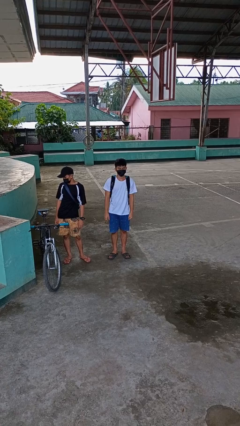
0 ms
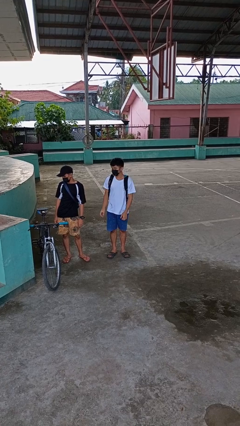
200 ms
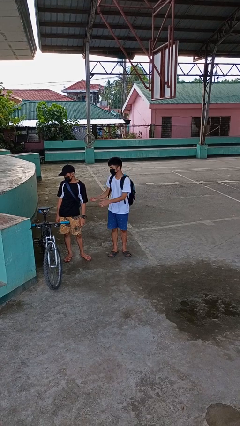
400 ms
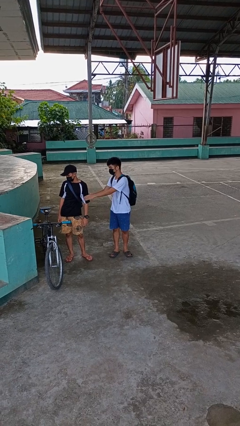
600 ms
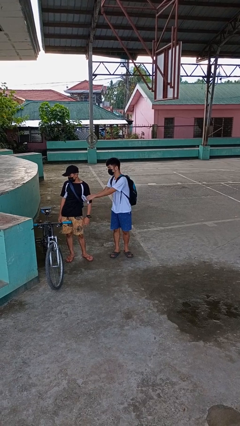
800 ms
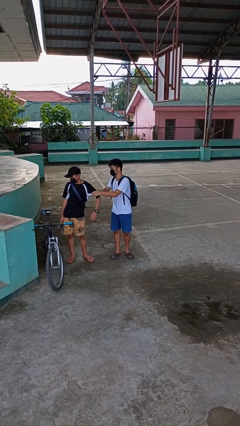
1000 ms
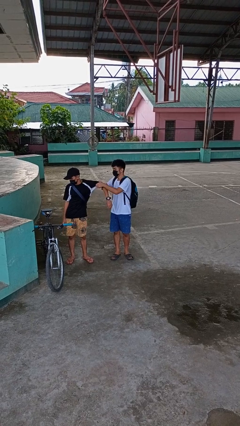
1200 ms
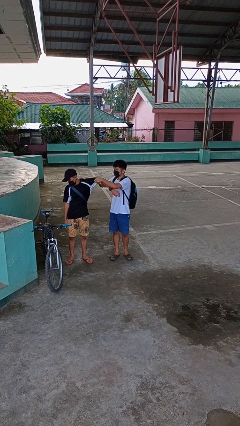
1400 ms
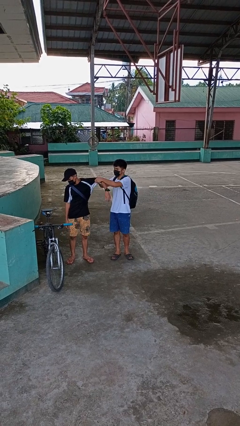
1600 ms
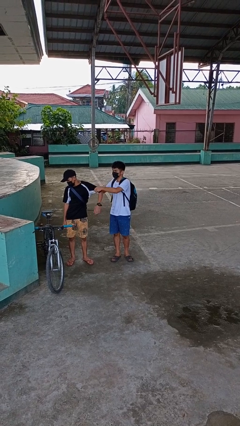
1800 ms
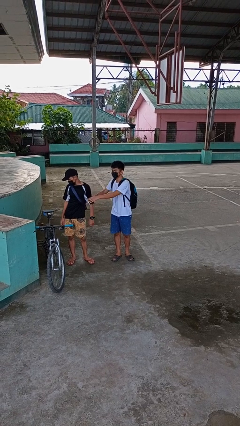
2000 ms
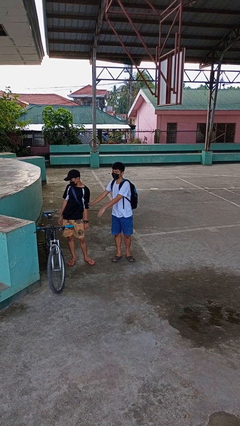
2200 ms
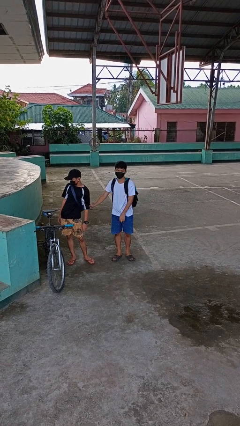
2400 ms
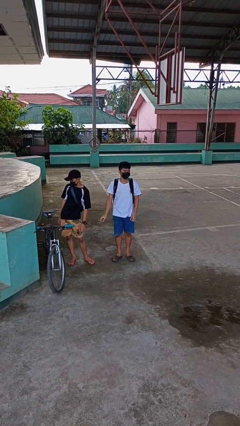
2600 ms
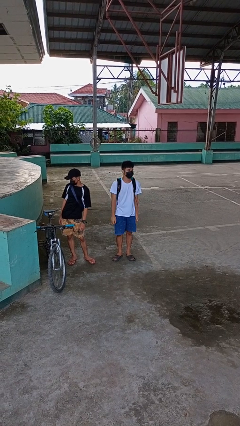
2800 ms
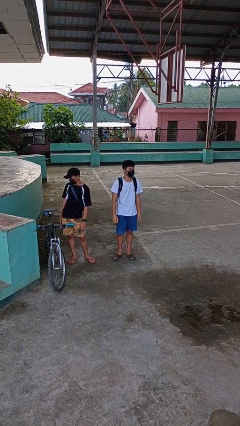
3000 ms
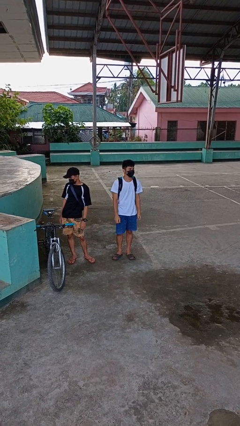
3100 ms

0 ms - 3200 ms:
person grabs person by bicep

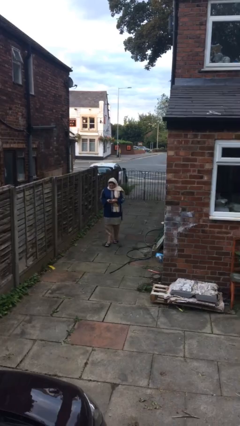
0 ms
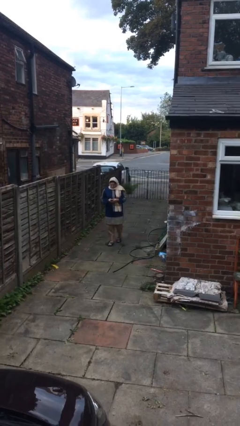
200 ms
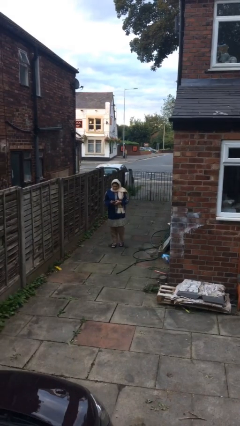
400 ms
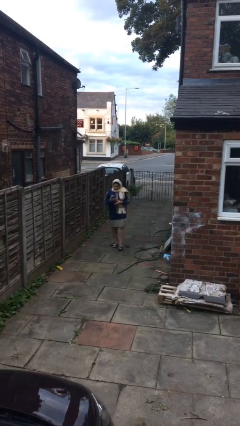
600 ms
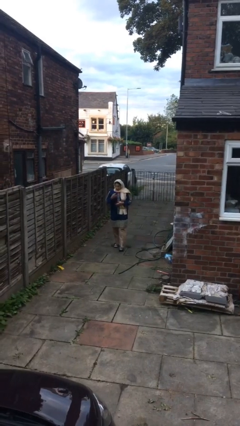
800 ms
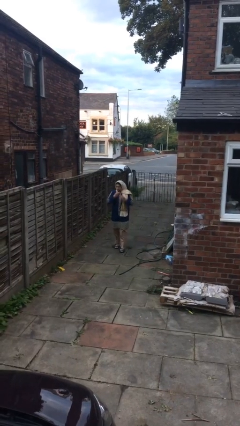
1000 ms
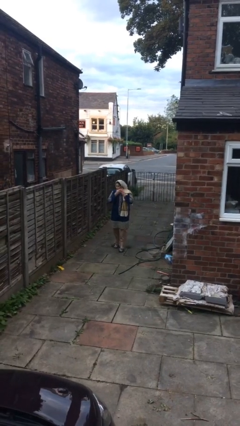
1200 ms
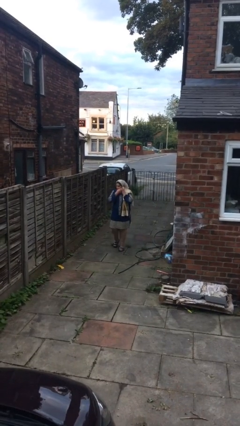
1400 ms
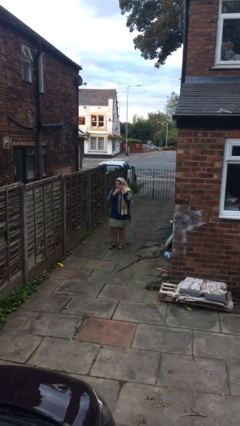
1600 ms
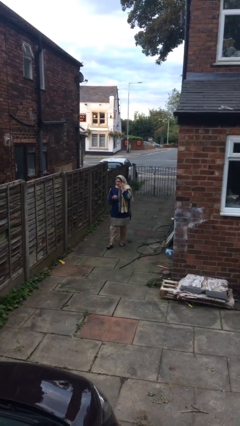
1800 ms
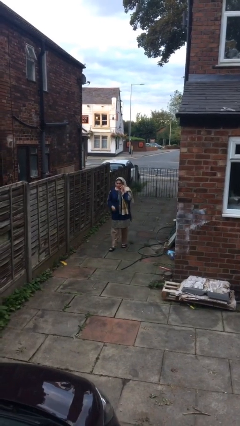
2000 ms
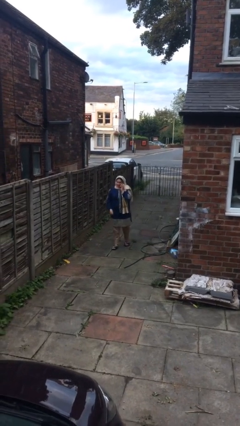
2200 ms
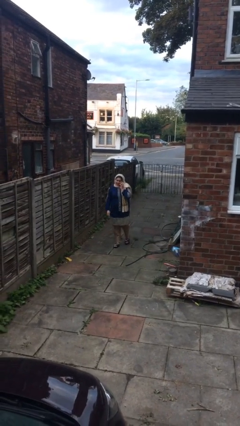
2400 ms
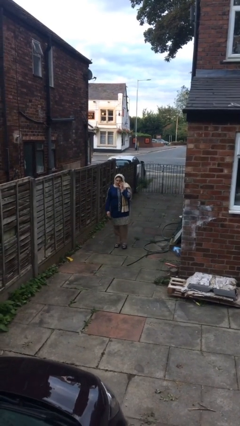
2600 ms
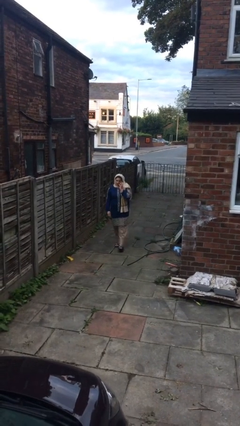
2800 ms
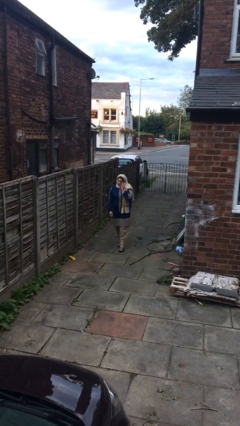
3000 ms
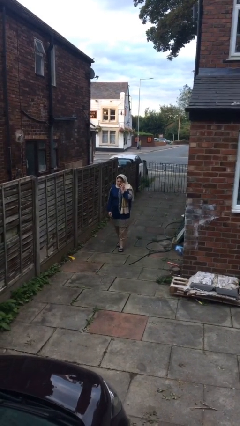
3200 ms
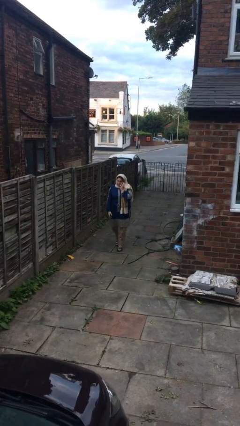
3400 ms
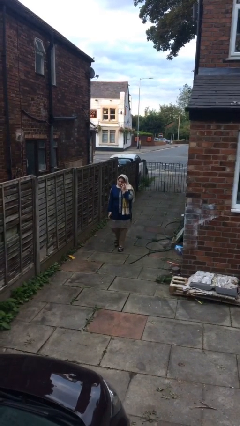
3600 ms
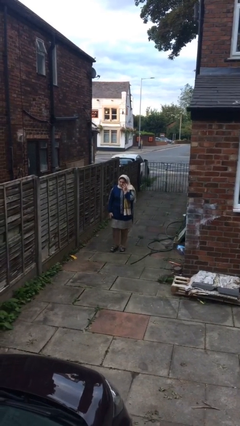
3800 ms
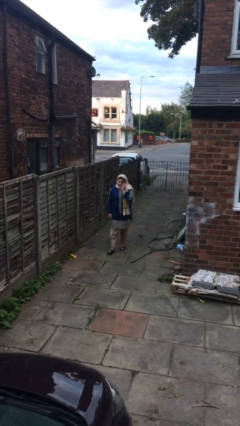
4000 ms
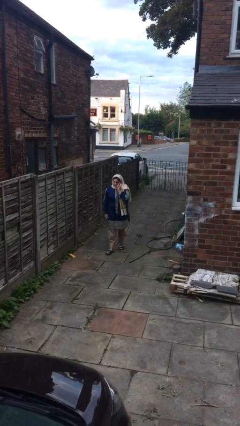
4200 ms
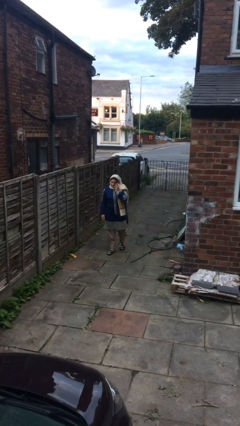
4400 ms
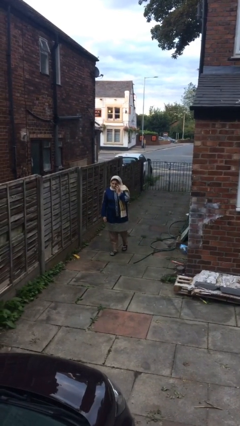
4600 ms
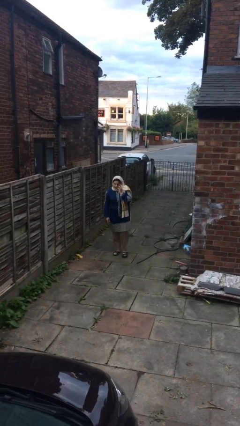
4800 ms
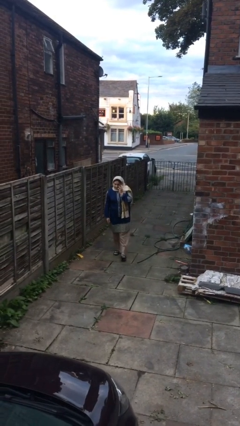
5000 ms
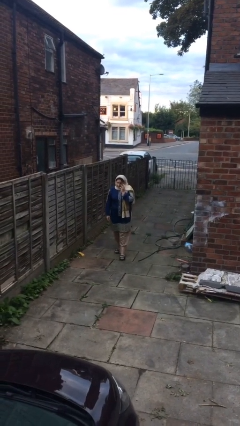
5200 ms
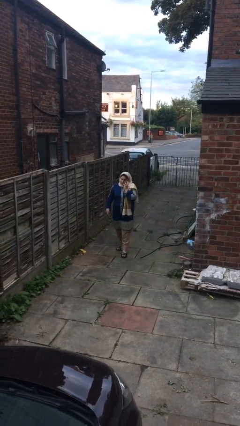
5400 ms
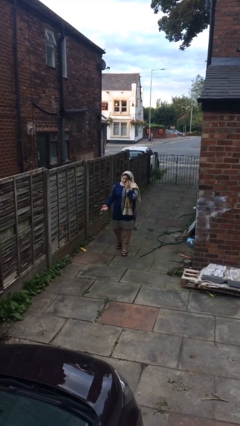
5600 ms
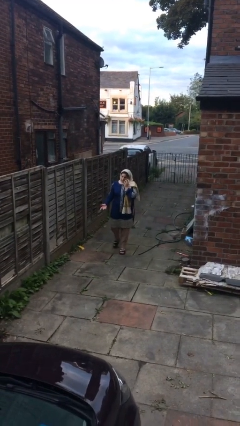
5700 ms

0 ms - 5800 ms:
person talks on phone

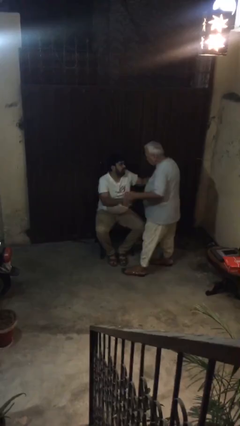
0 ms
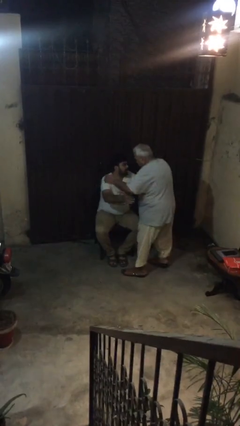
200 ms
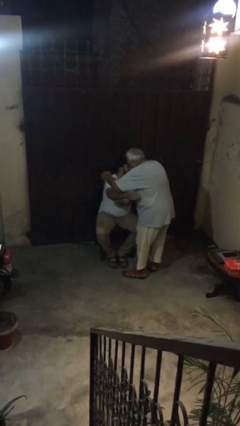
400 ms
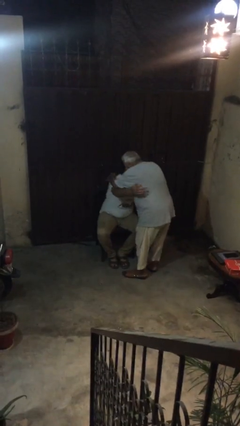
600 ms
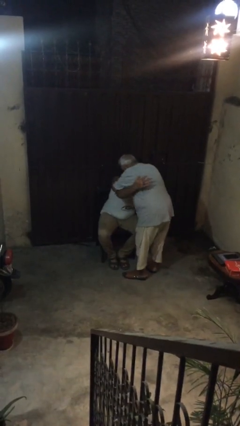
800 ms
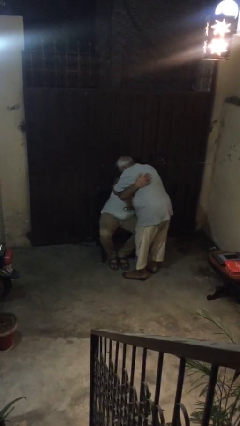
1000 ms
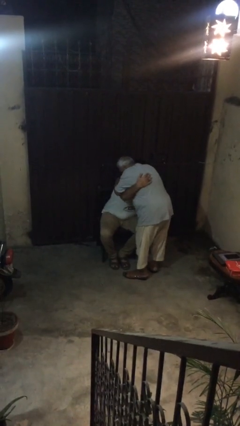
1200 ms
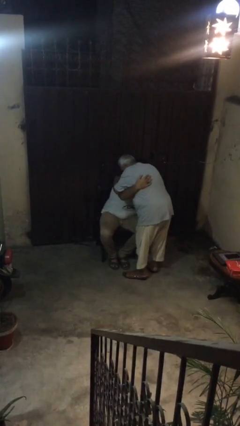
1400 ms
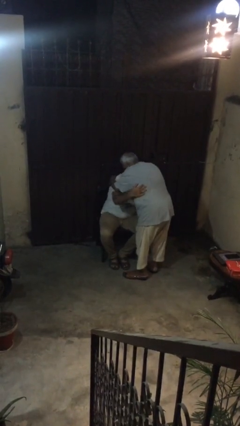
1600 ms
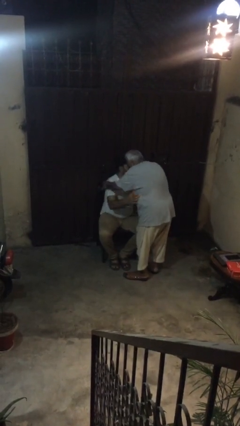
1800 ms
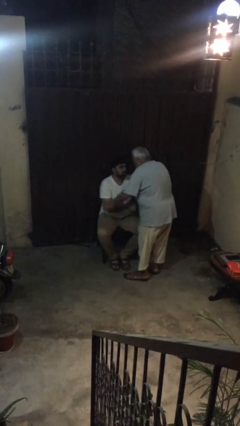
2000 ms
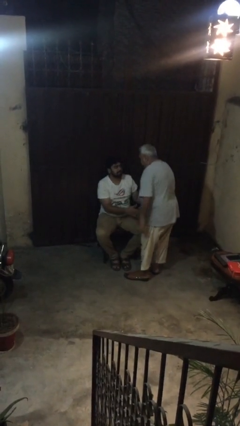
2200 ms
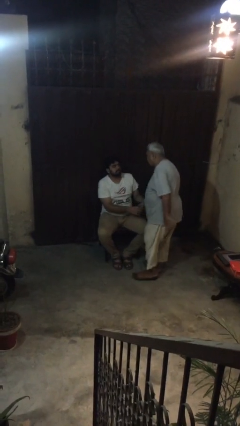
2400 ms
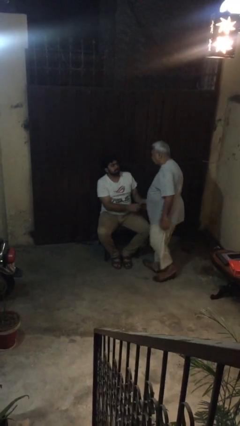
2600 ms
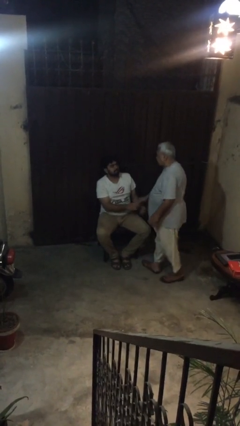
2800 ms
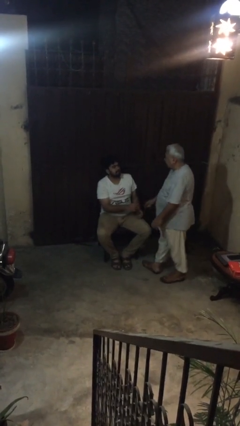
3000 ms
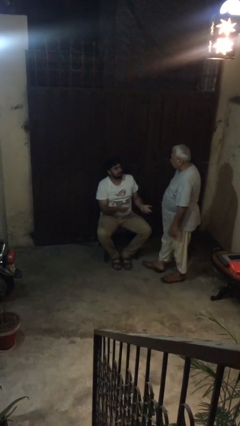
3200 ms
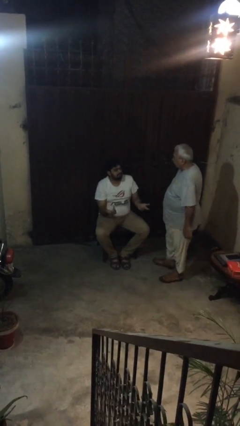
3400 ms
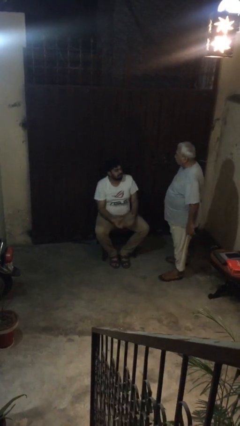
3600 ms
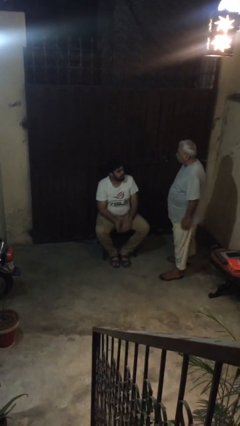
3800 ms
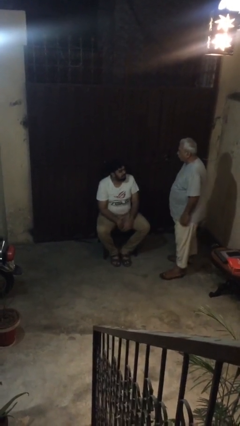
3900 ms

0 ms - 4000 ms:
person embraces person

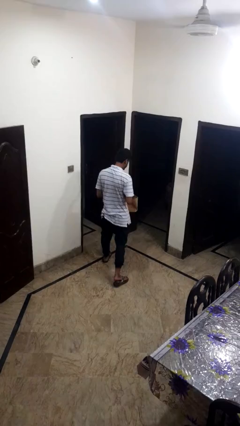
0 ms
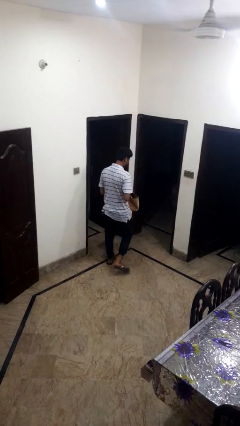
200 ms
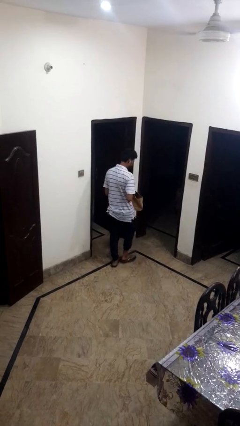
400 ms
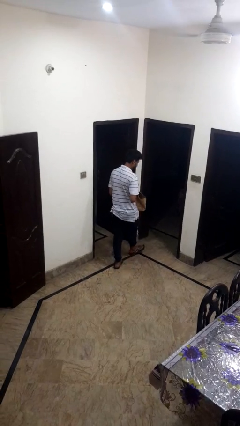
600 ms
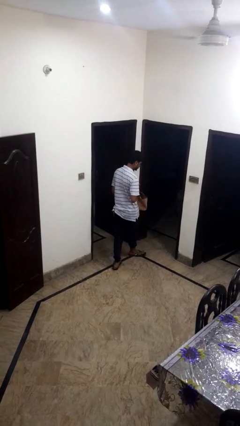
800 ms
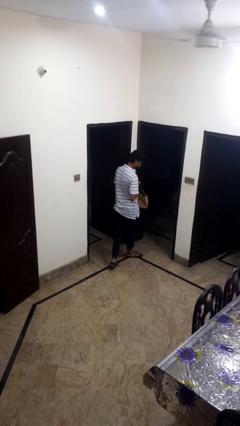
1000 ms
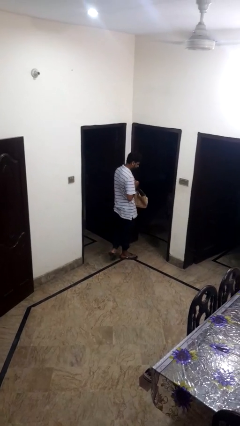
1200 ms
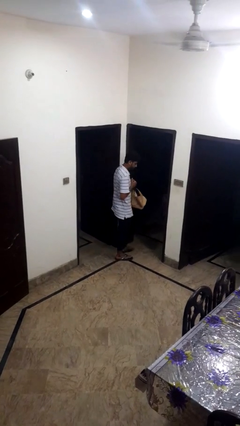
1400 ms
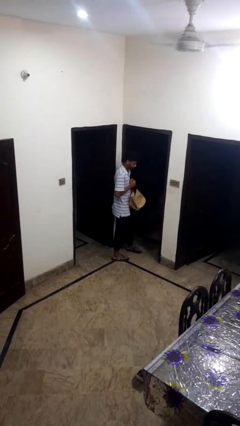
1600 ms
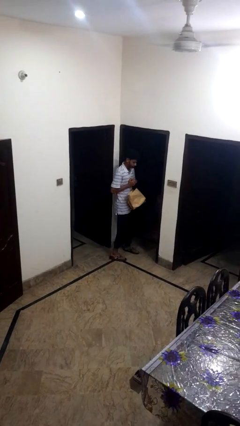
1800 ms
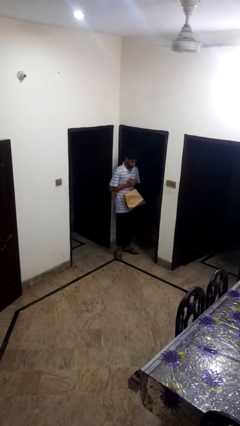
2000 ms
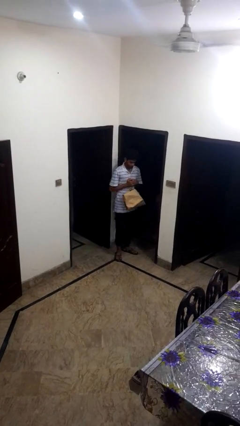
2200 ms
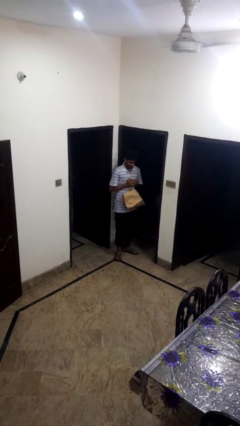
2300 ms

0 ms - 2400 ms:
person carries groceries

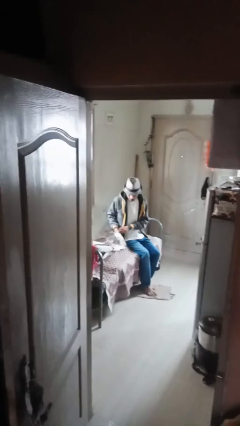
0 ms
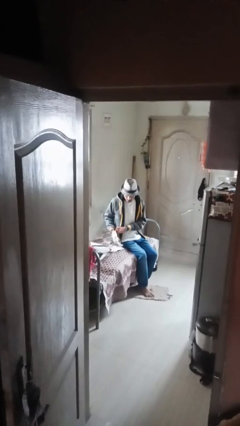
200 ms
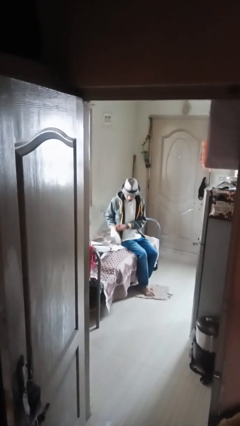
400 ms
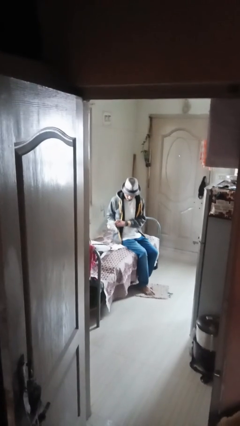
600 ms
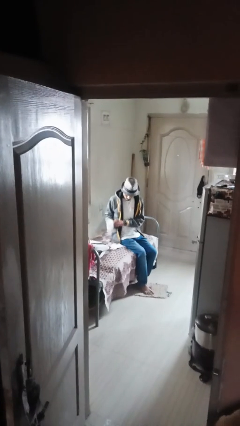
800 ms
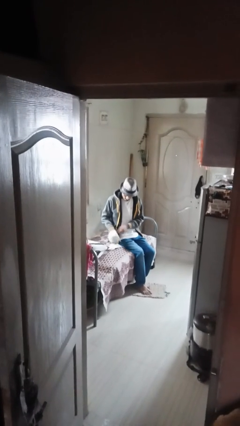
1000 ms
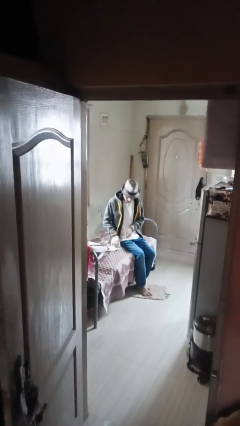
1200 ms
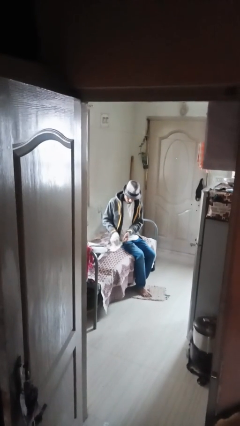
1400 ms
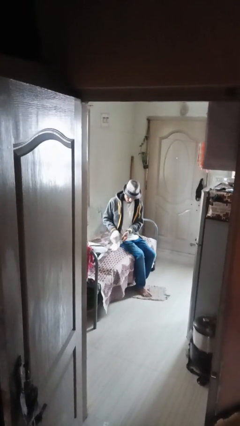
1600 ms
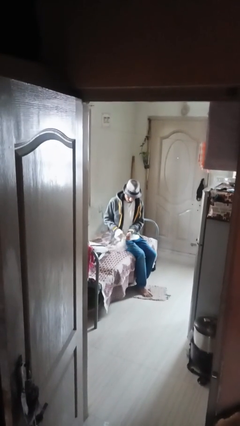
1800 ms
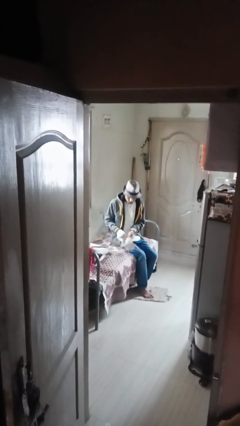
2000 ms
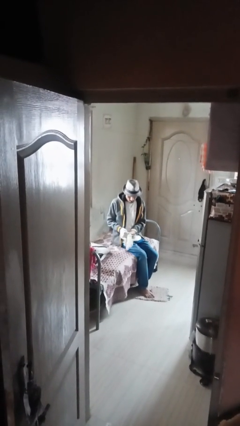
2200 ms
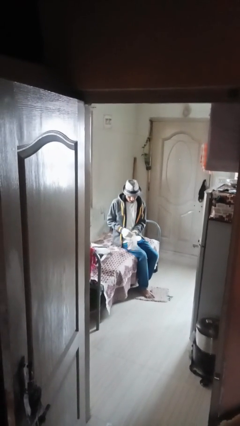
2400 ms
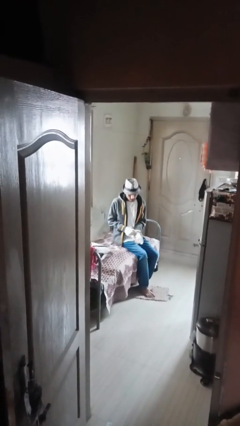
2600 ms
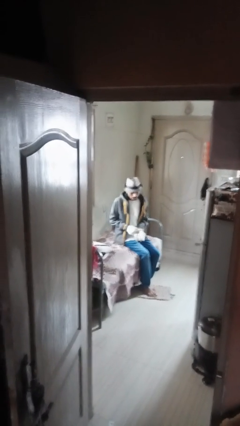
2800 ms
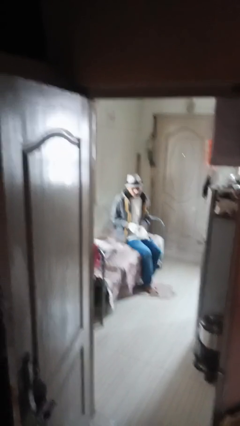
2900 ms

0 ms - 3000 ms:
person puts on gloves
